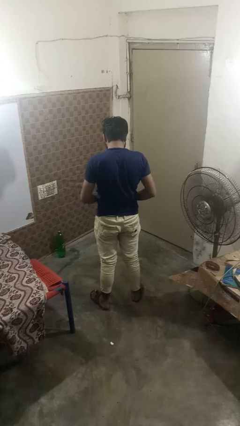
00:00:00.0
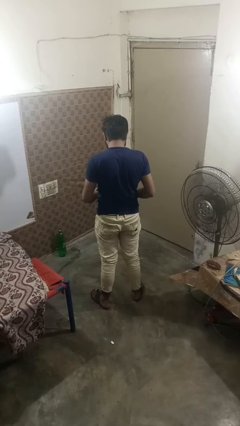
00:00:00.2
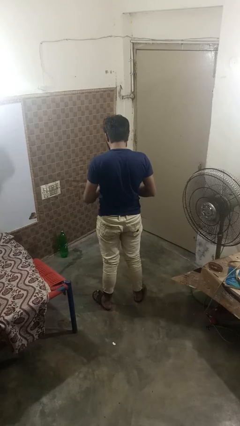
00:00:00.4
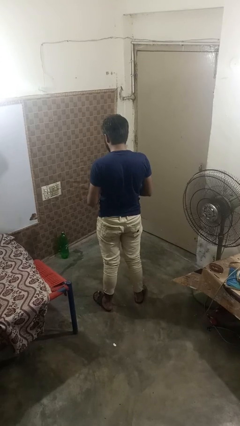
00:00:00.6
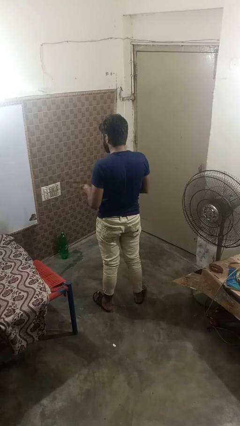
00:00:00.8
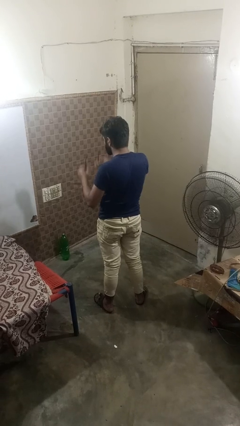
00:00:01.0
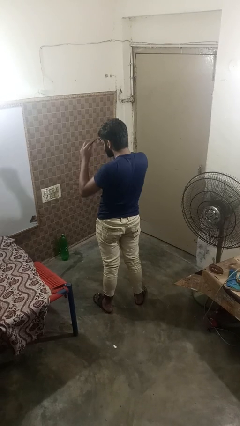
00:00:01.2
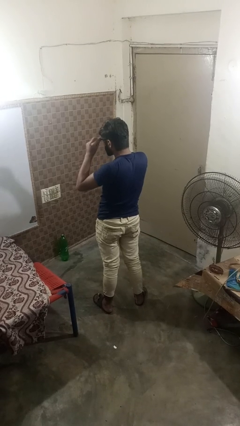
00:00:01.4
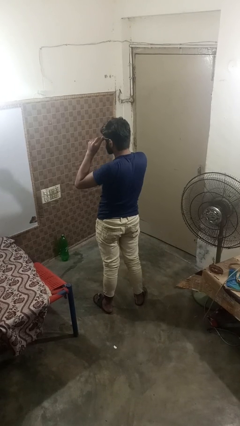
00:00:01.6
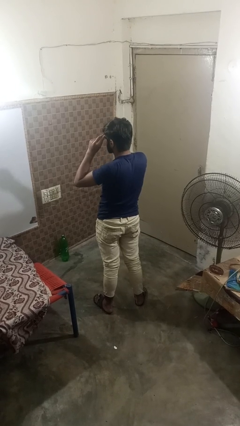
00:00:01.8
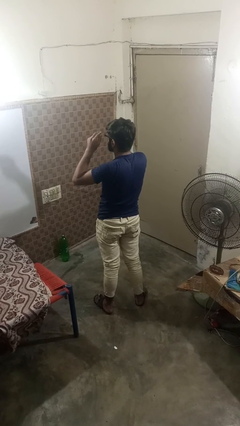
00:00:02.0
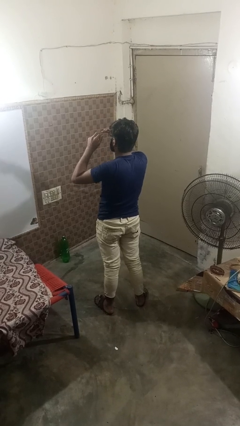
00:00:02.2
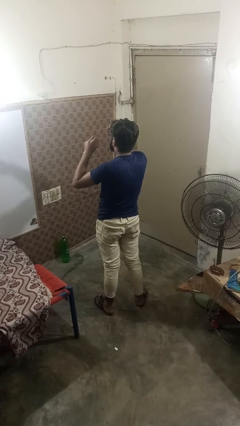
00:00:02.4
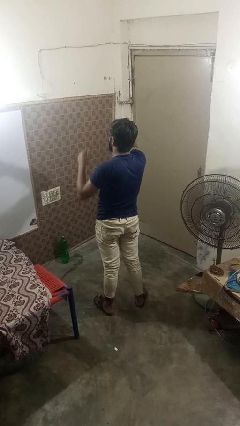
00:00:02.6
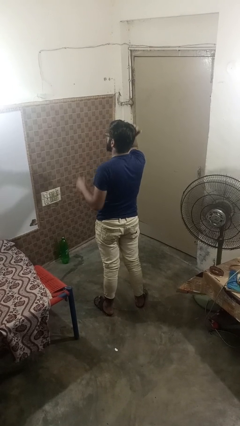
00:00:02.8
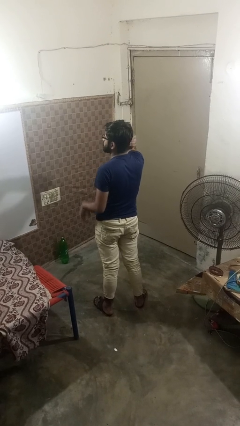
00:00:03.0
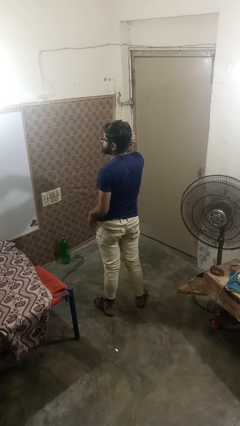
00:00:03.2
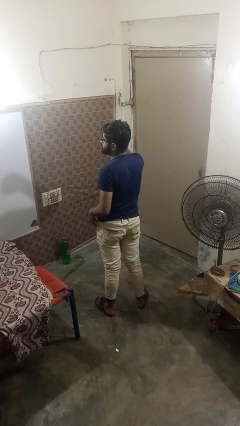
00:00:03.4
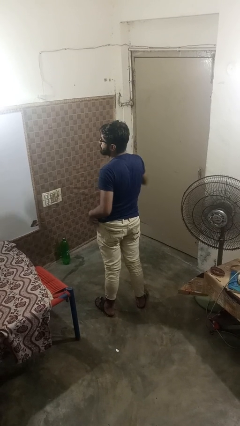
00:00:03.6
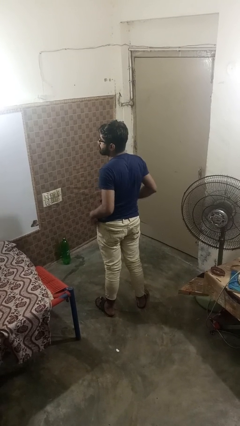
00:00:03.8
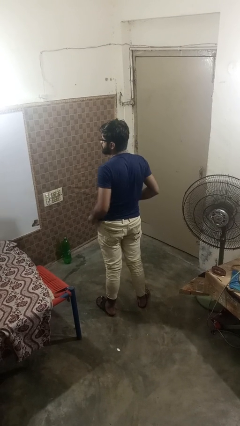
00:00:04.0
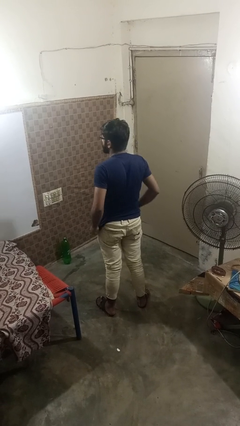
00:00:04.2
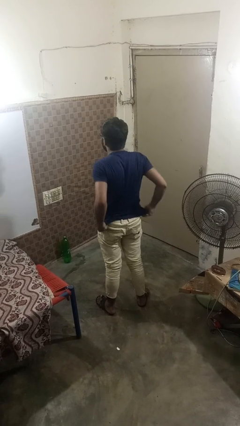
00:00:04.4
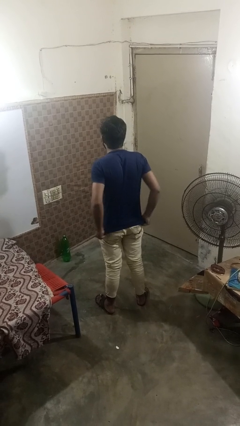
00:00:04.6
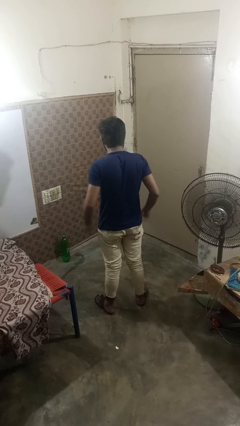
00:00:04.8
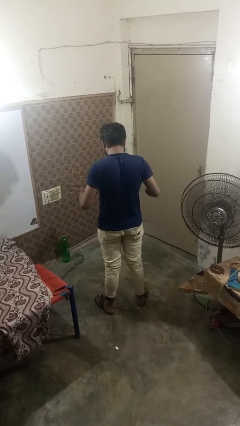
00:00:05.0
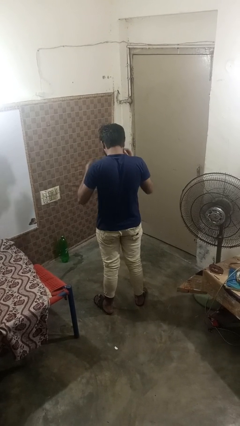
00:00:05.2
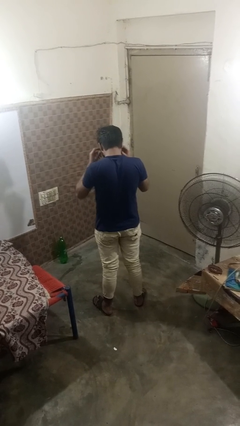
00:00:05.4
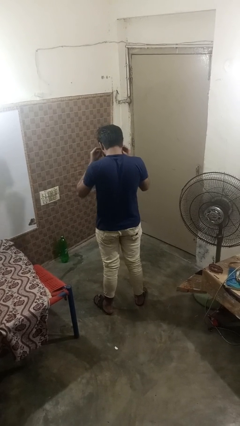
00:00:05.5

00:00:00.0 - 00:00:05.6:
person puts on glasses

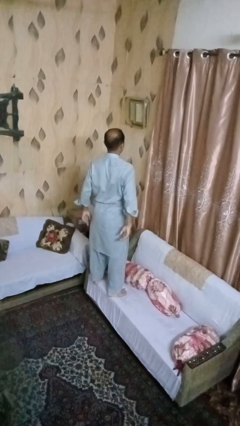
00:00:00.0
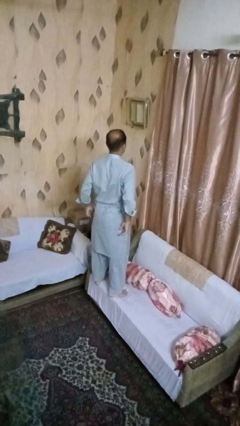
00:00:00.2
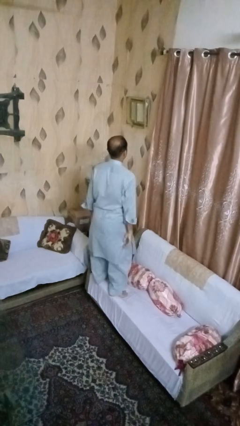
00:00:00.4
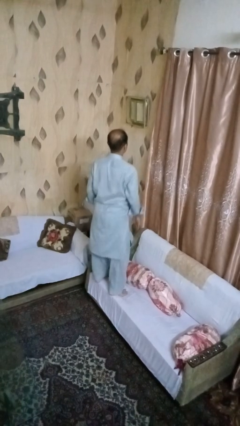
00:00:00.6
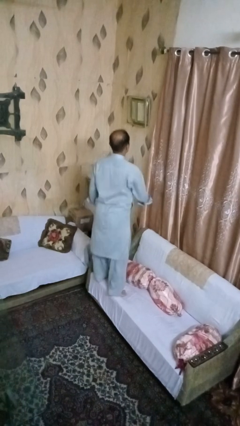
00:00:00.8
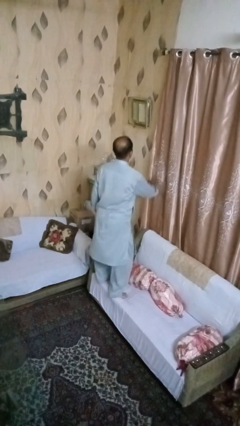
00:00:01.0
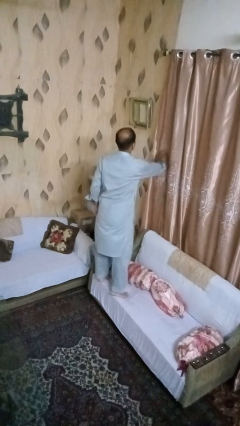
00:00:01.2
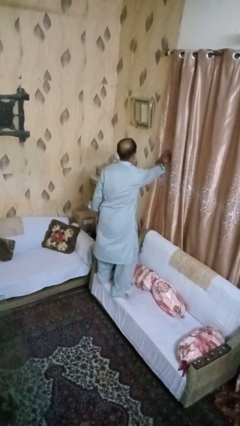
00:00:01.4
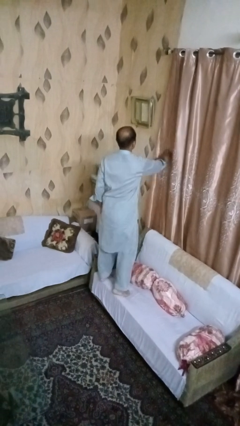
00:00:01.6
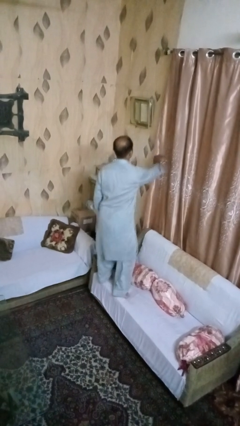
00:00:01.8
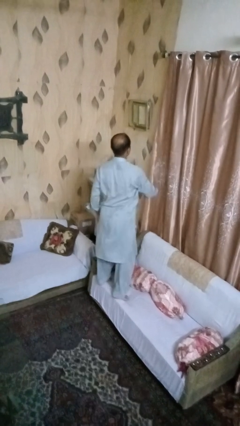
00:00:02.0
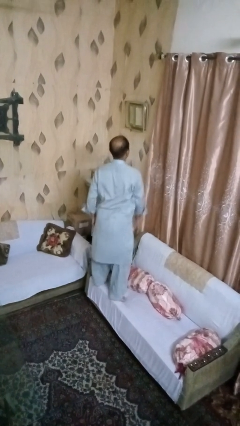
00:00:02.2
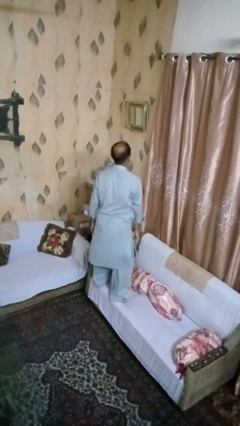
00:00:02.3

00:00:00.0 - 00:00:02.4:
person jumps on couch

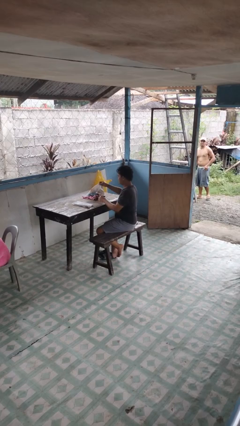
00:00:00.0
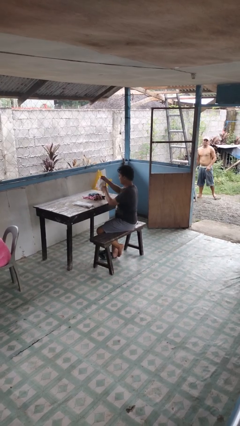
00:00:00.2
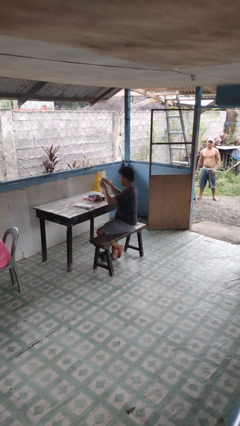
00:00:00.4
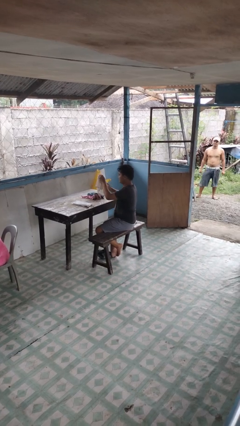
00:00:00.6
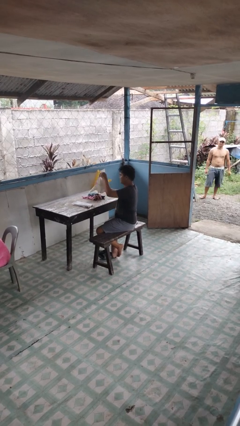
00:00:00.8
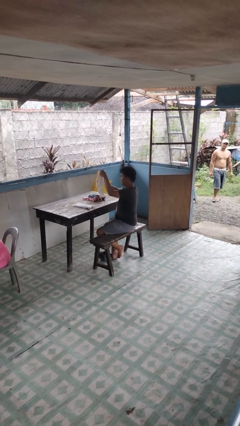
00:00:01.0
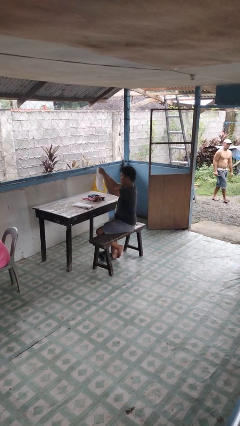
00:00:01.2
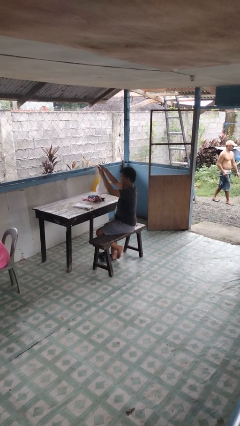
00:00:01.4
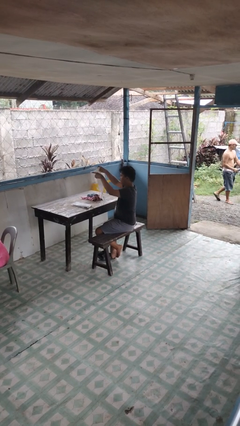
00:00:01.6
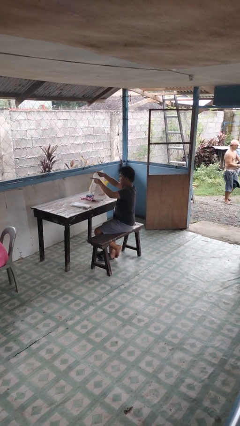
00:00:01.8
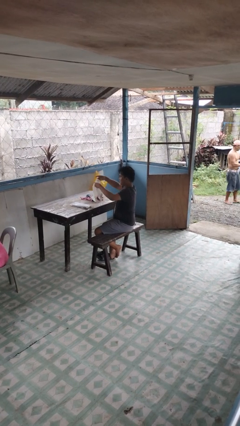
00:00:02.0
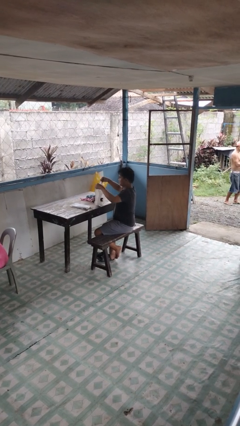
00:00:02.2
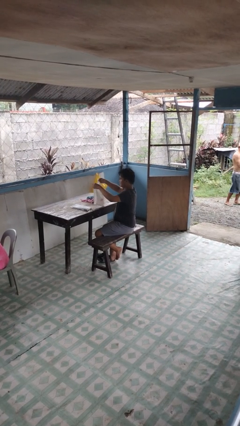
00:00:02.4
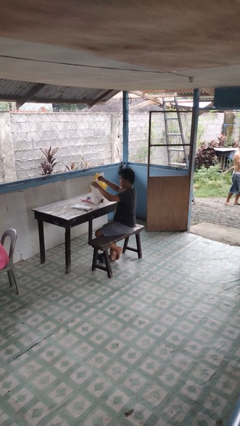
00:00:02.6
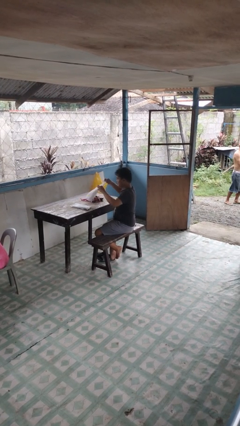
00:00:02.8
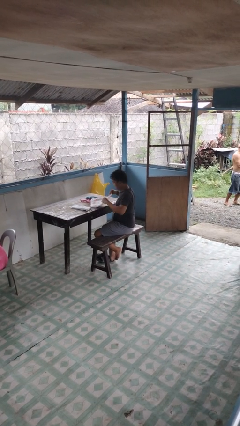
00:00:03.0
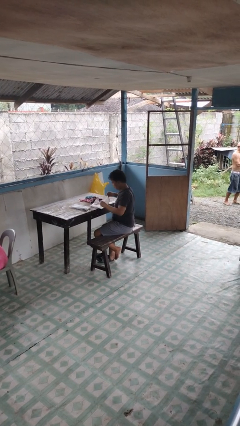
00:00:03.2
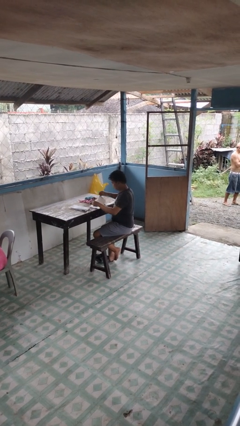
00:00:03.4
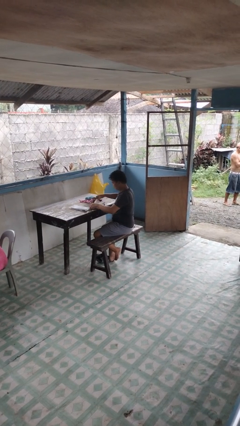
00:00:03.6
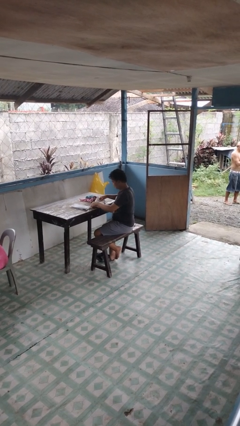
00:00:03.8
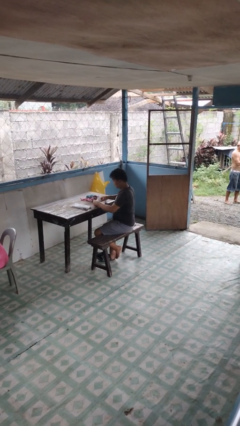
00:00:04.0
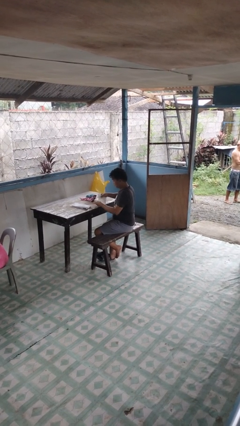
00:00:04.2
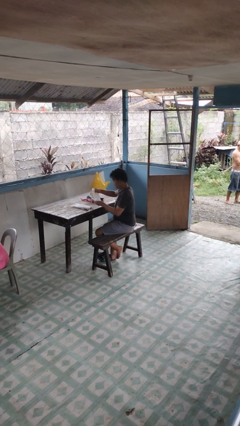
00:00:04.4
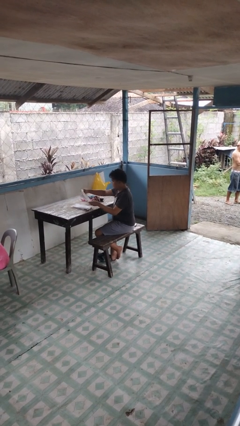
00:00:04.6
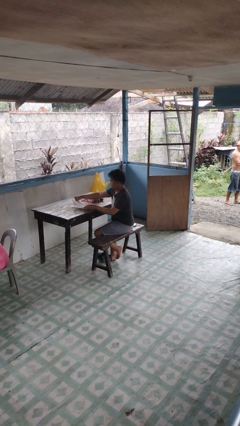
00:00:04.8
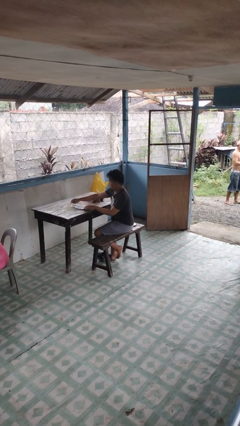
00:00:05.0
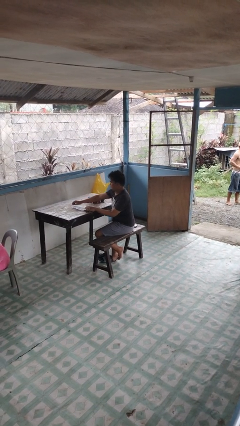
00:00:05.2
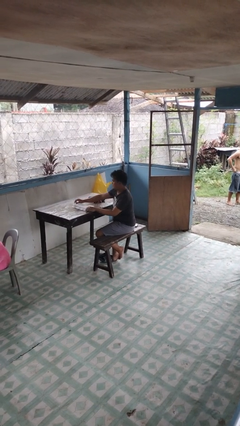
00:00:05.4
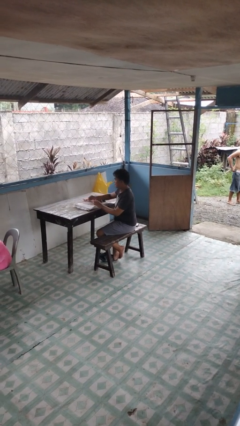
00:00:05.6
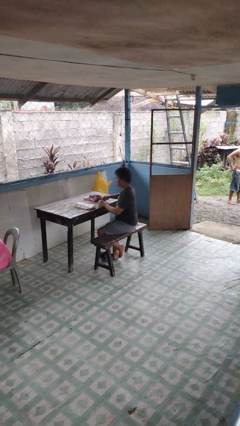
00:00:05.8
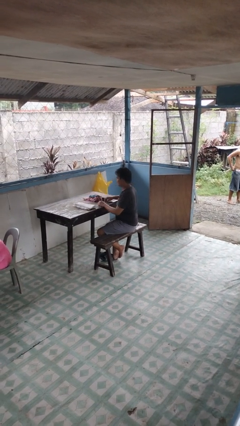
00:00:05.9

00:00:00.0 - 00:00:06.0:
person folds towel

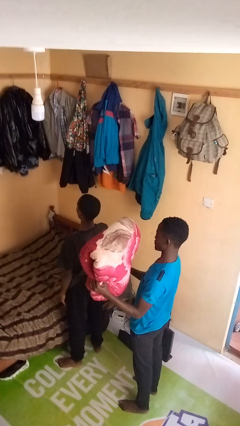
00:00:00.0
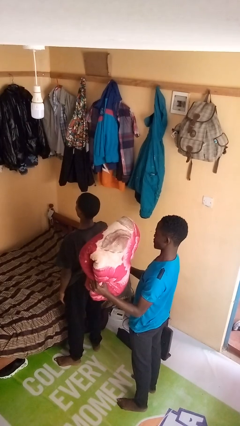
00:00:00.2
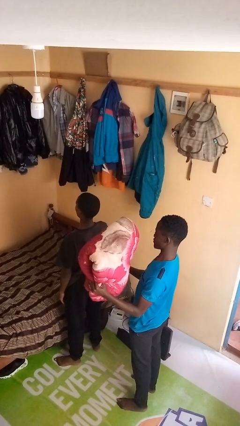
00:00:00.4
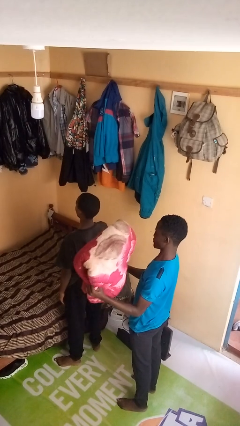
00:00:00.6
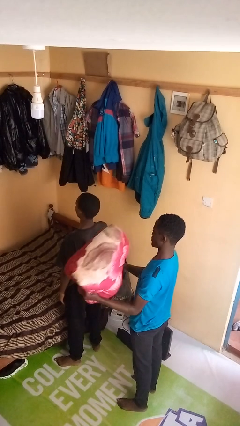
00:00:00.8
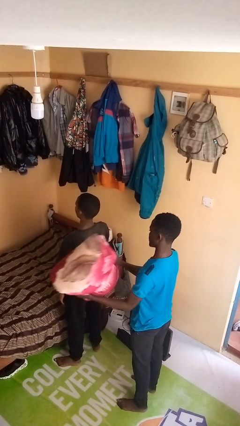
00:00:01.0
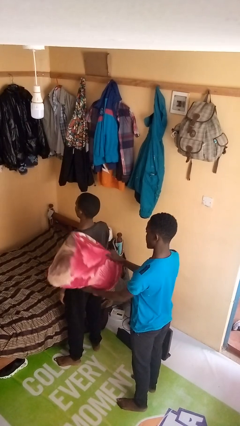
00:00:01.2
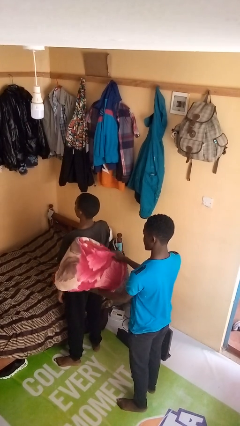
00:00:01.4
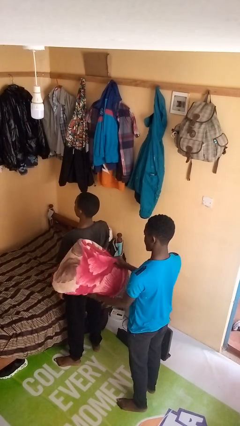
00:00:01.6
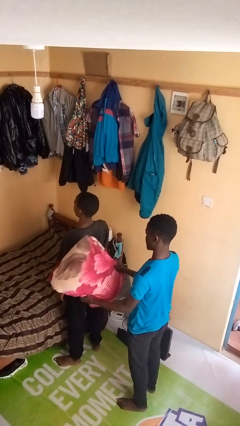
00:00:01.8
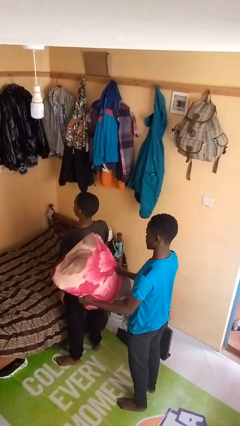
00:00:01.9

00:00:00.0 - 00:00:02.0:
person hits person with pillow

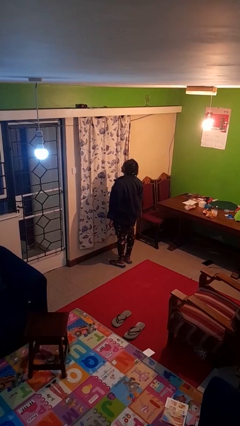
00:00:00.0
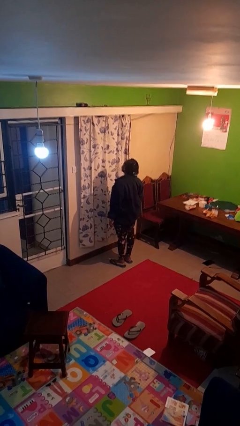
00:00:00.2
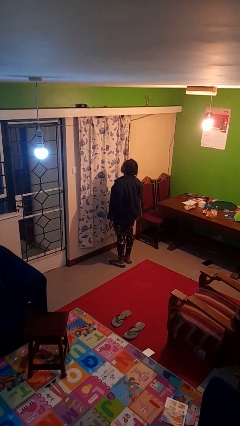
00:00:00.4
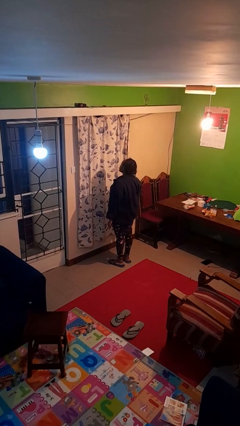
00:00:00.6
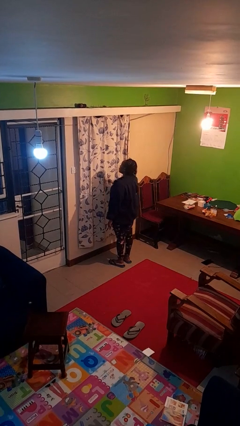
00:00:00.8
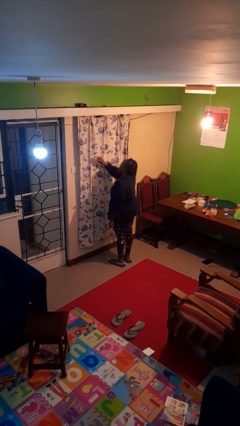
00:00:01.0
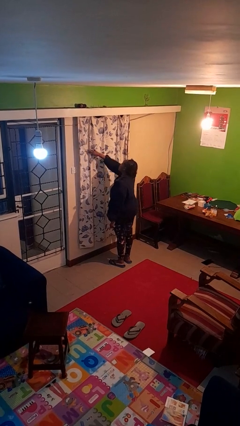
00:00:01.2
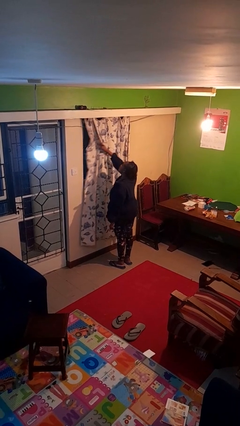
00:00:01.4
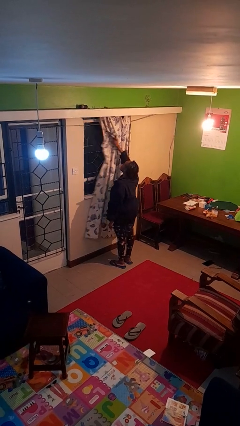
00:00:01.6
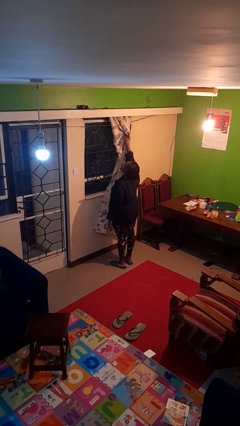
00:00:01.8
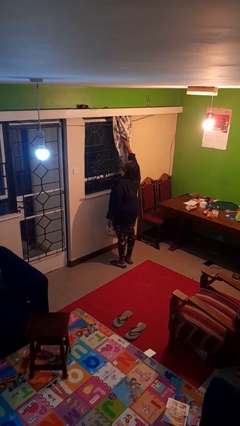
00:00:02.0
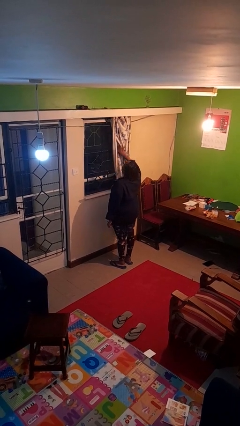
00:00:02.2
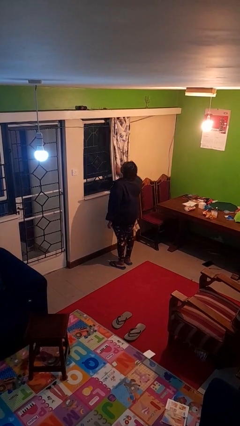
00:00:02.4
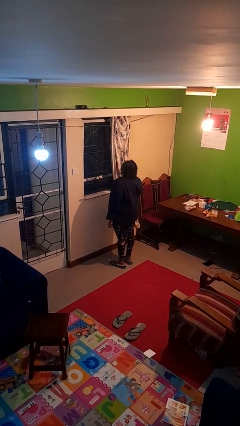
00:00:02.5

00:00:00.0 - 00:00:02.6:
person opens curtains
